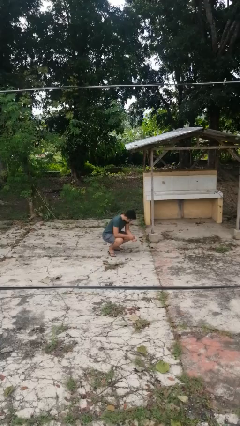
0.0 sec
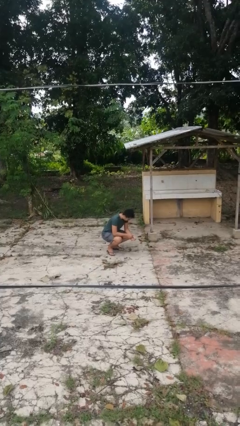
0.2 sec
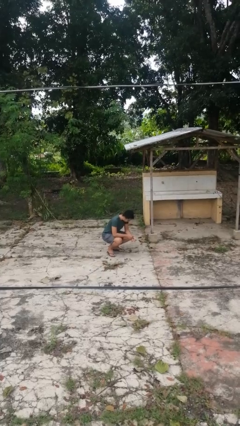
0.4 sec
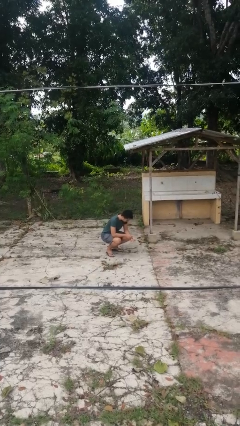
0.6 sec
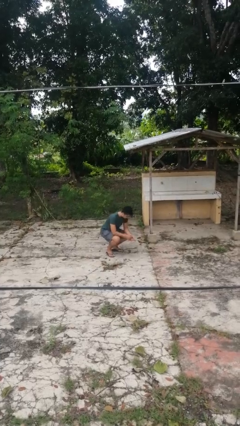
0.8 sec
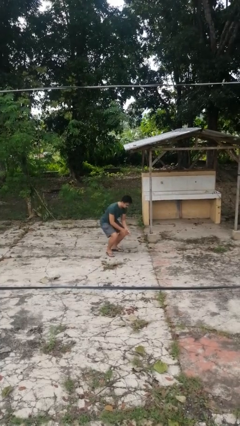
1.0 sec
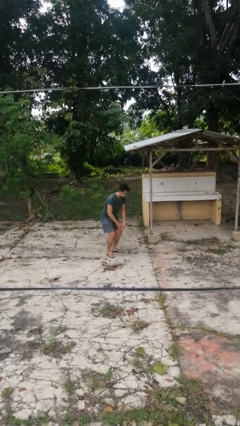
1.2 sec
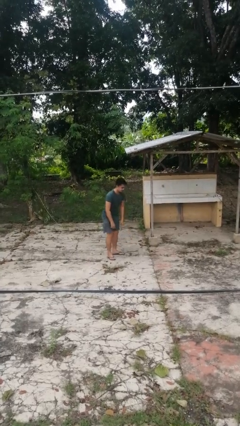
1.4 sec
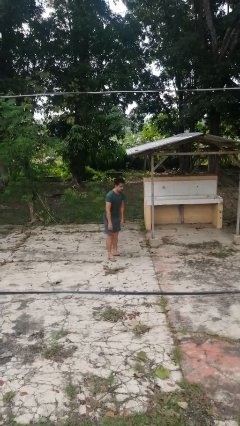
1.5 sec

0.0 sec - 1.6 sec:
person stands up

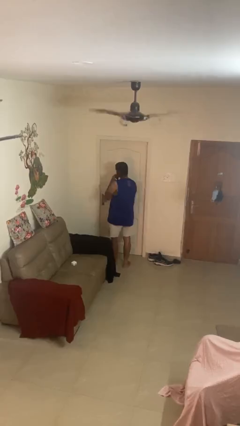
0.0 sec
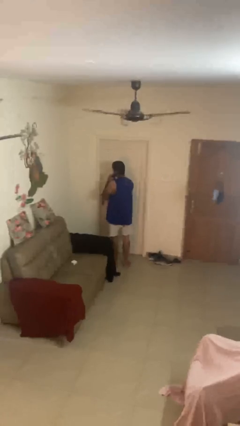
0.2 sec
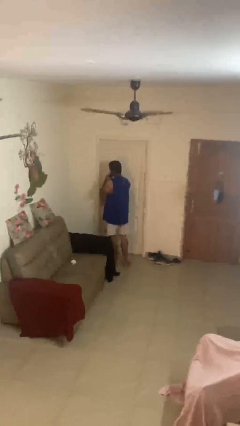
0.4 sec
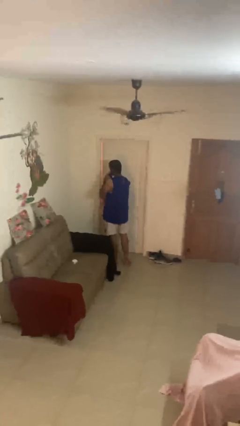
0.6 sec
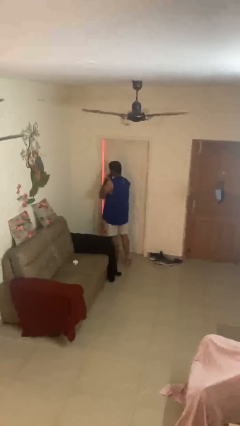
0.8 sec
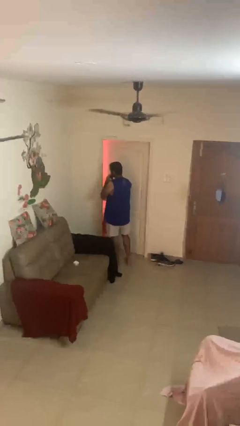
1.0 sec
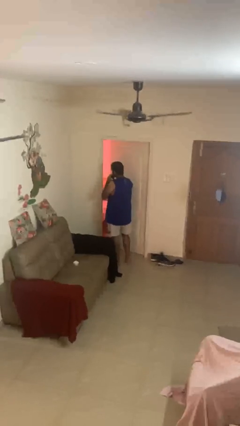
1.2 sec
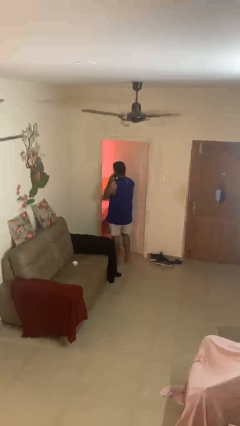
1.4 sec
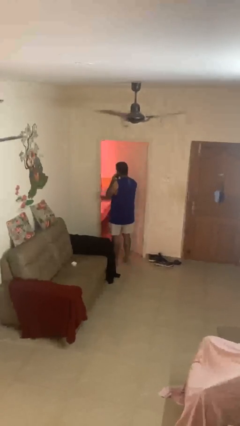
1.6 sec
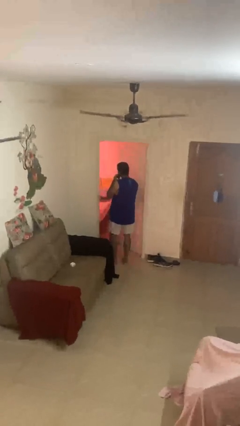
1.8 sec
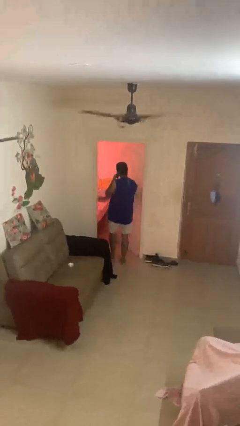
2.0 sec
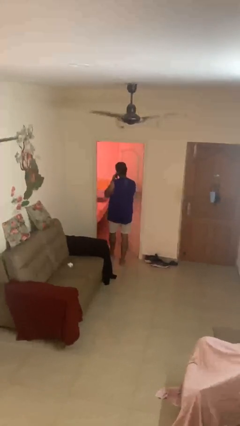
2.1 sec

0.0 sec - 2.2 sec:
person opens facility door

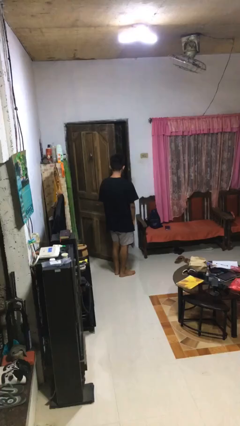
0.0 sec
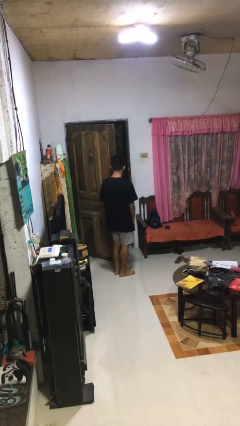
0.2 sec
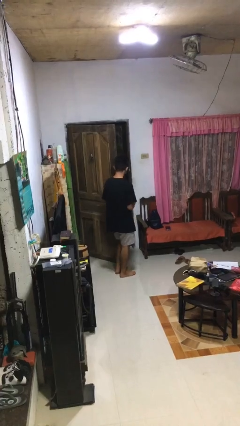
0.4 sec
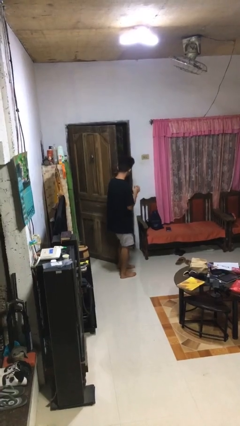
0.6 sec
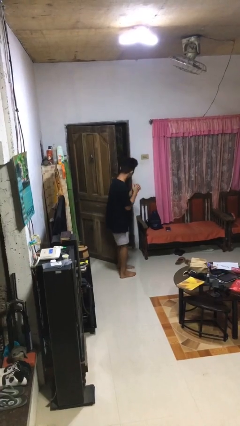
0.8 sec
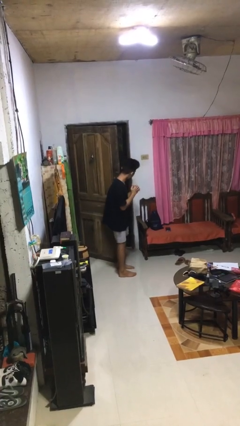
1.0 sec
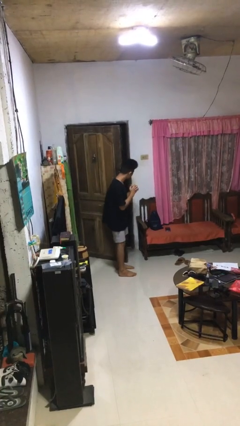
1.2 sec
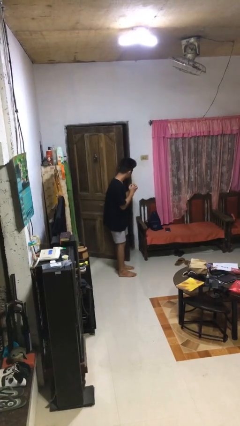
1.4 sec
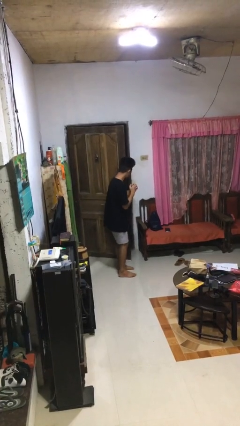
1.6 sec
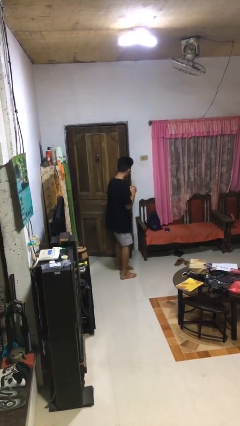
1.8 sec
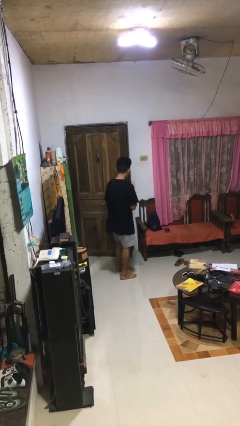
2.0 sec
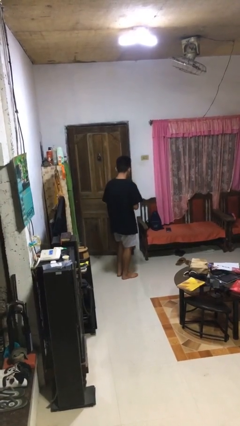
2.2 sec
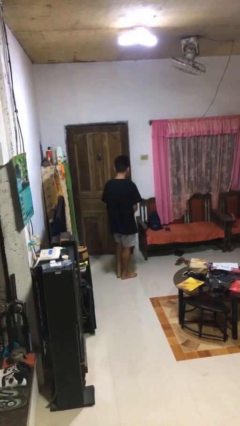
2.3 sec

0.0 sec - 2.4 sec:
person closes door with hip

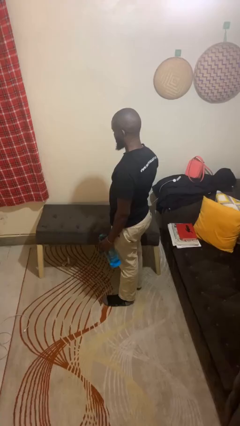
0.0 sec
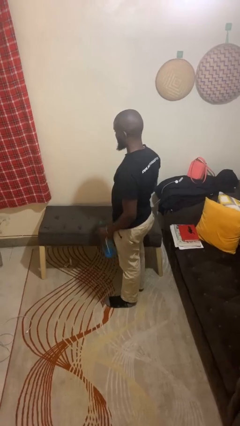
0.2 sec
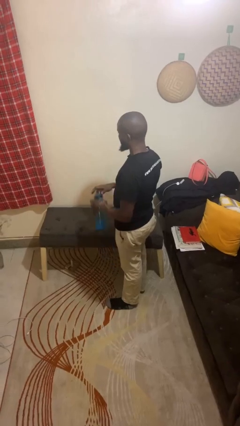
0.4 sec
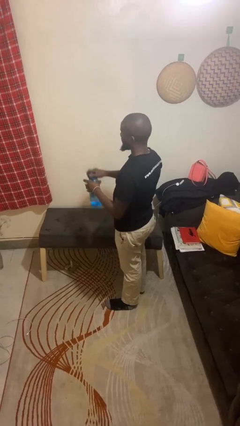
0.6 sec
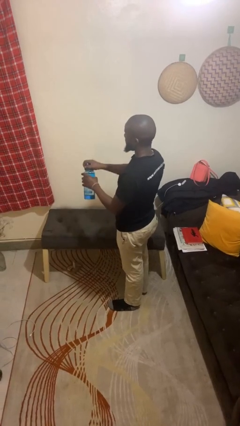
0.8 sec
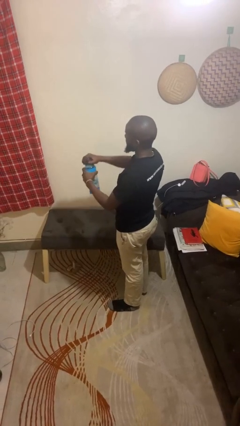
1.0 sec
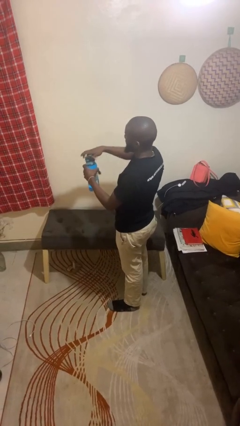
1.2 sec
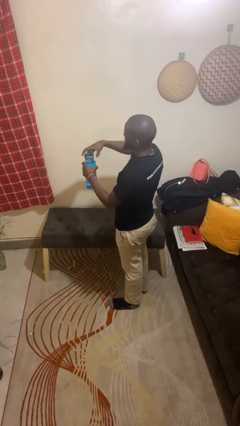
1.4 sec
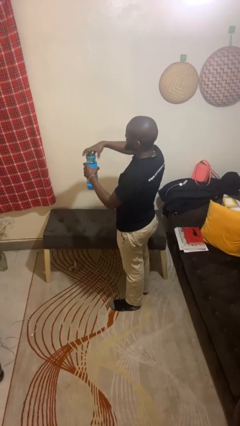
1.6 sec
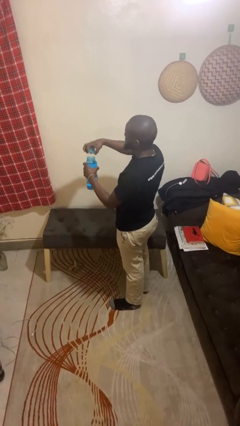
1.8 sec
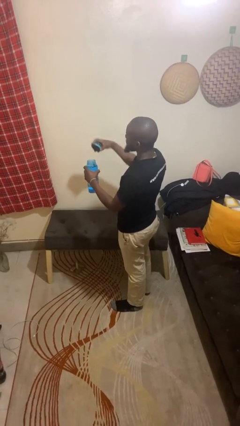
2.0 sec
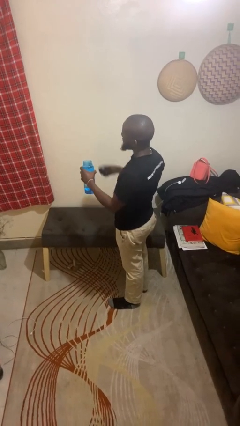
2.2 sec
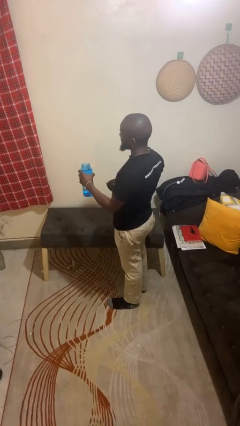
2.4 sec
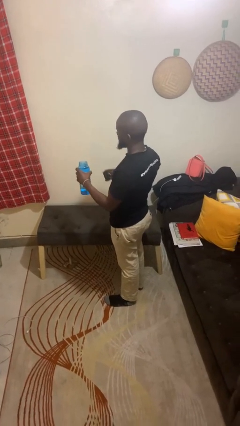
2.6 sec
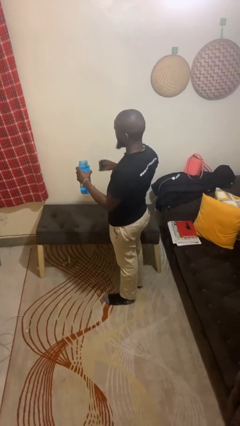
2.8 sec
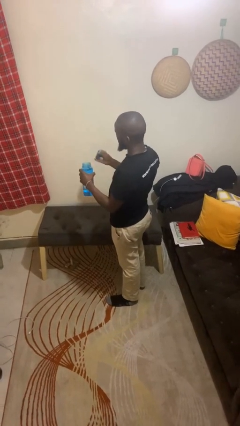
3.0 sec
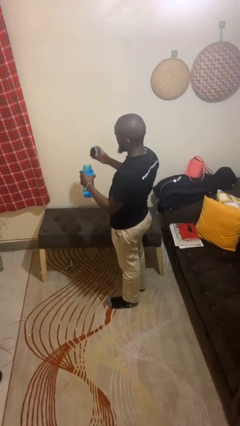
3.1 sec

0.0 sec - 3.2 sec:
person opens jar

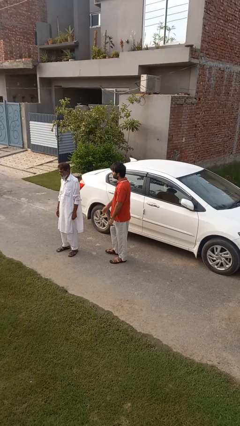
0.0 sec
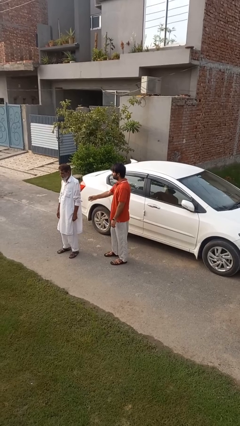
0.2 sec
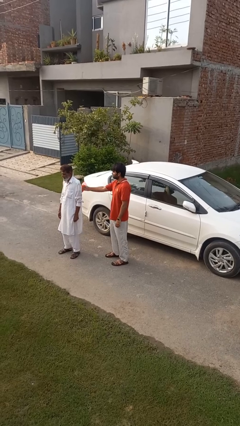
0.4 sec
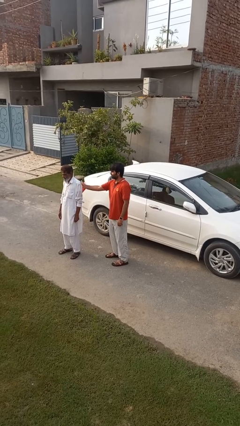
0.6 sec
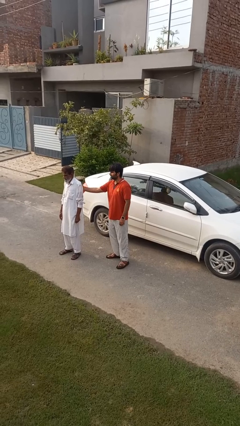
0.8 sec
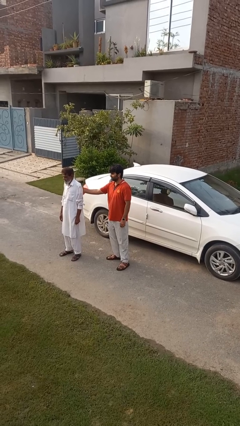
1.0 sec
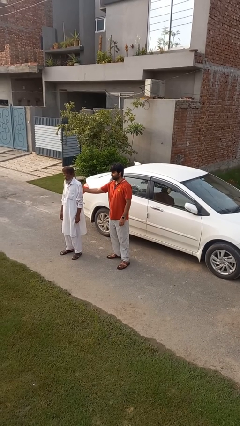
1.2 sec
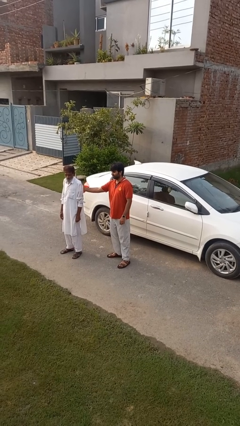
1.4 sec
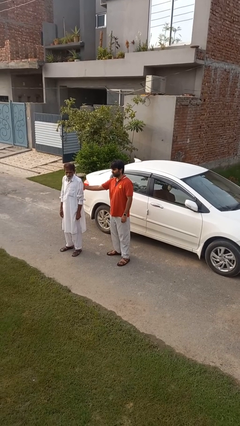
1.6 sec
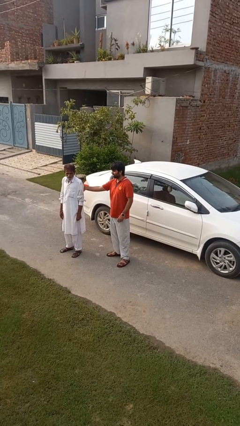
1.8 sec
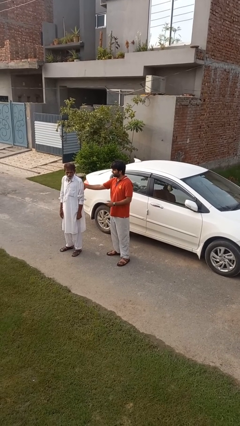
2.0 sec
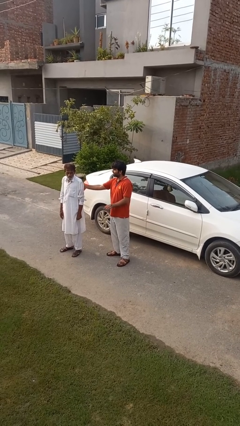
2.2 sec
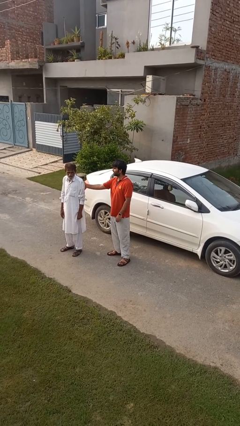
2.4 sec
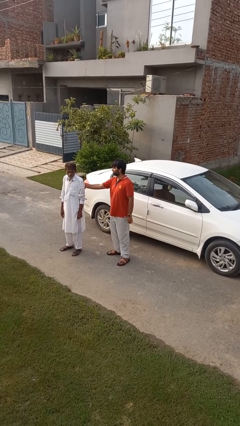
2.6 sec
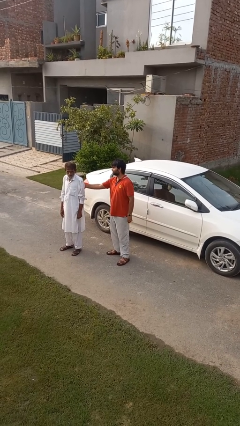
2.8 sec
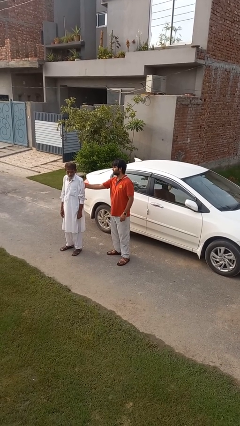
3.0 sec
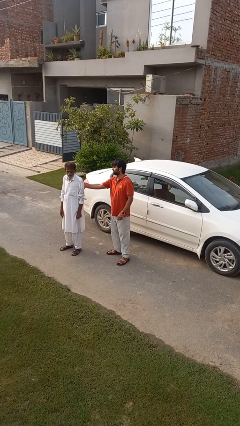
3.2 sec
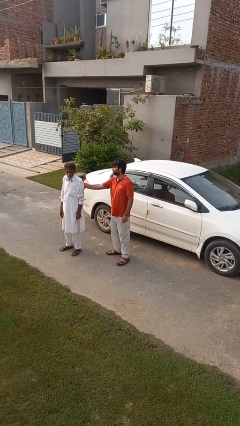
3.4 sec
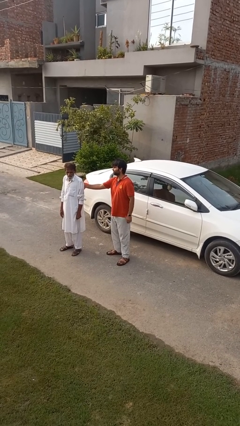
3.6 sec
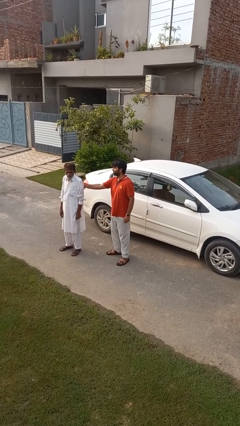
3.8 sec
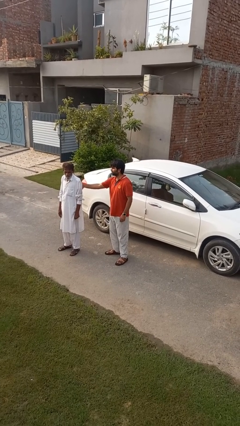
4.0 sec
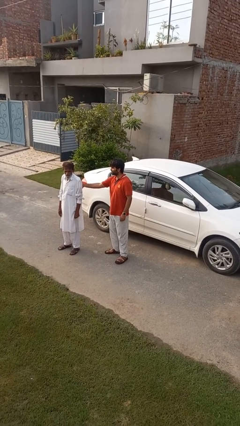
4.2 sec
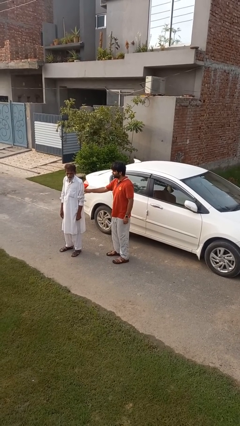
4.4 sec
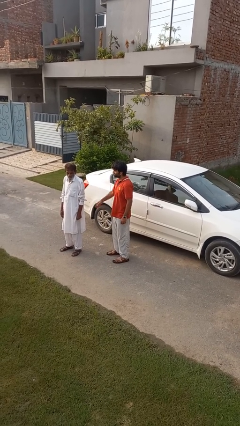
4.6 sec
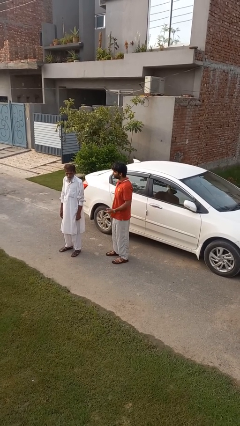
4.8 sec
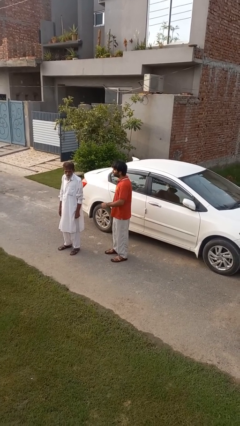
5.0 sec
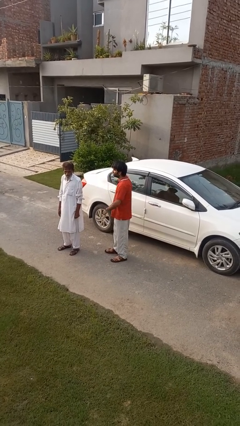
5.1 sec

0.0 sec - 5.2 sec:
person touches back of person

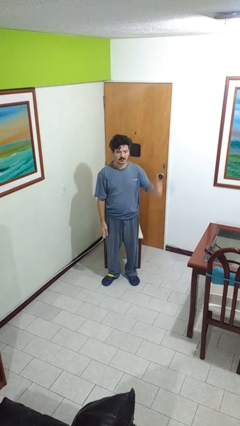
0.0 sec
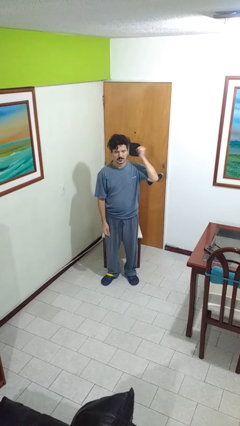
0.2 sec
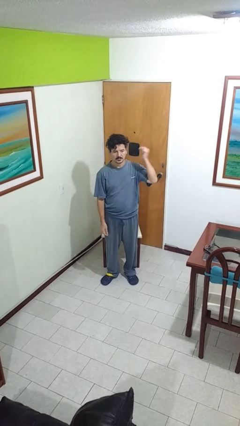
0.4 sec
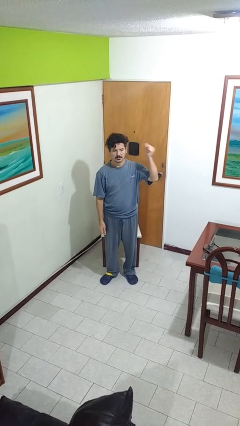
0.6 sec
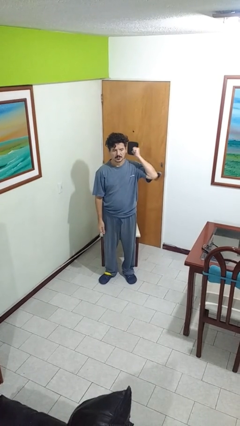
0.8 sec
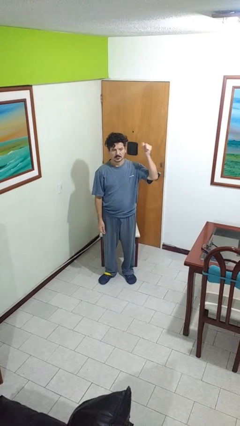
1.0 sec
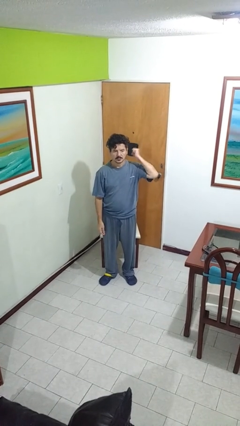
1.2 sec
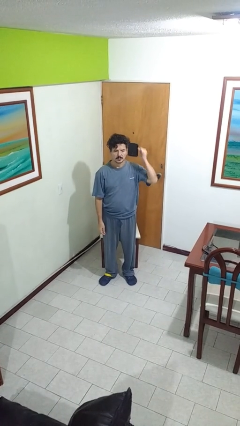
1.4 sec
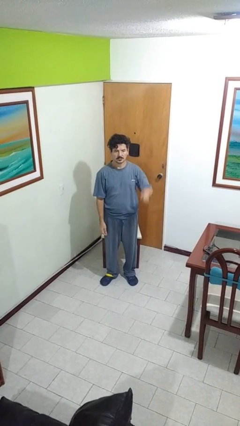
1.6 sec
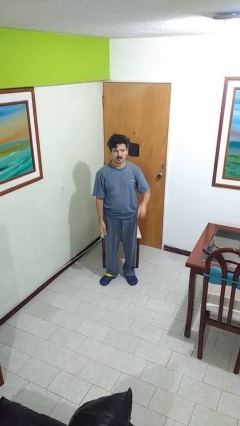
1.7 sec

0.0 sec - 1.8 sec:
person gestures behind me

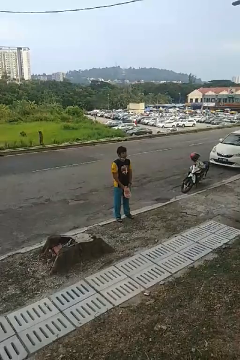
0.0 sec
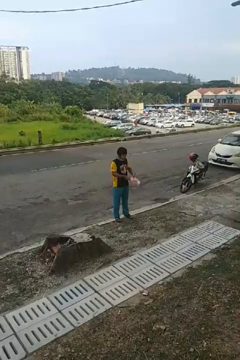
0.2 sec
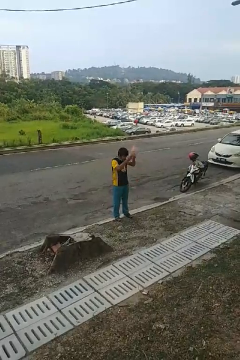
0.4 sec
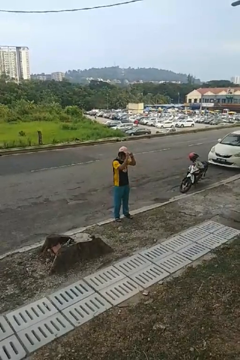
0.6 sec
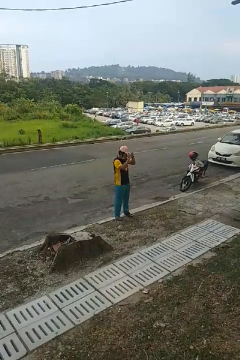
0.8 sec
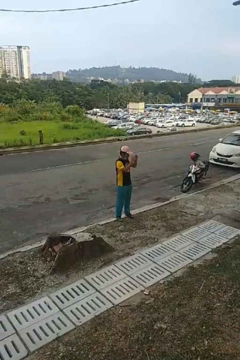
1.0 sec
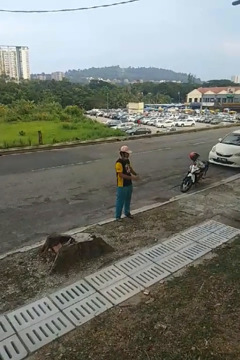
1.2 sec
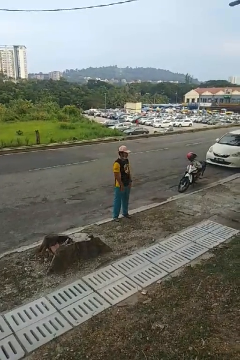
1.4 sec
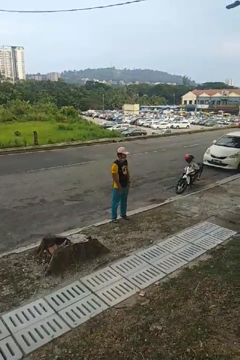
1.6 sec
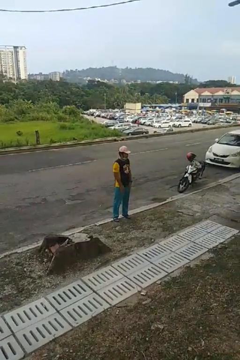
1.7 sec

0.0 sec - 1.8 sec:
person puts on hat
